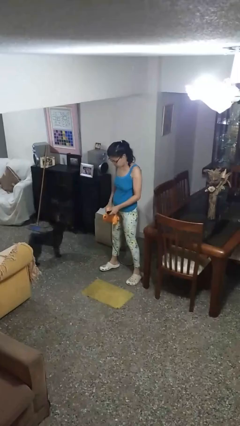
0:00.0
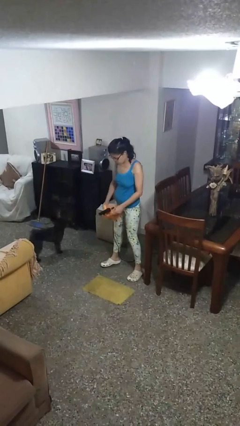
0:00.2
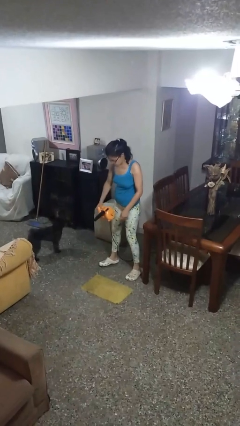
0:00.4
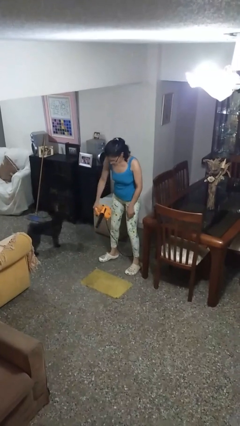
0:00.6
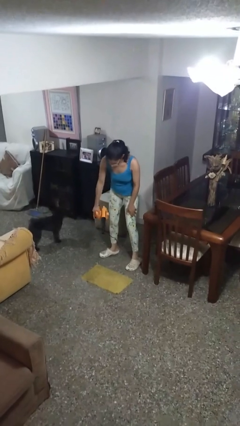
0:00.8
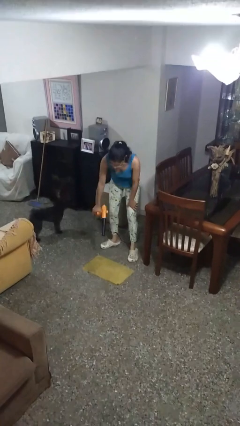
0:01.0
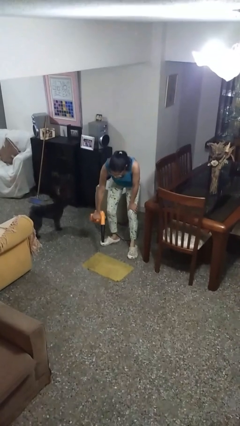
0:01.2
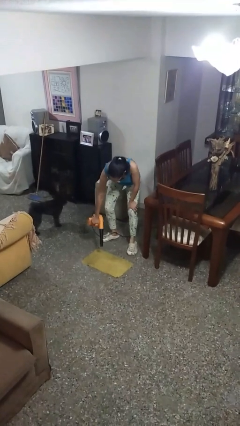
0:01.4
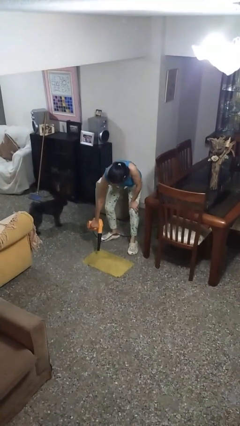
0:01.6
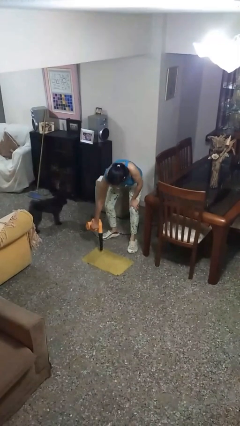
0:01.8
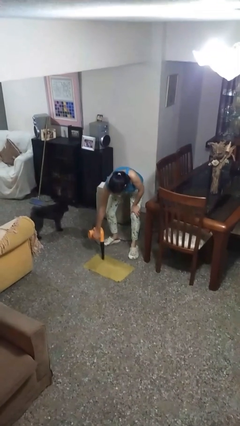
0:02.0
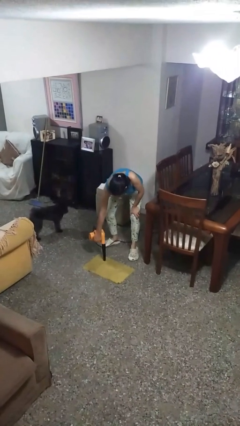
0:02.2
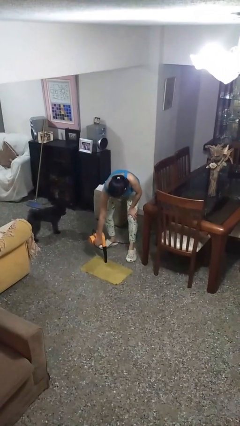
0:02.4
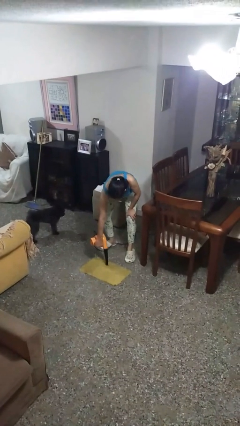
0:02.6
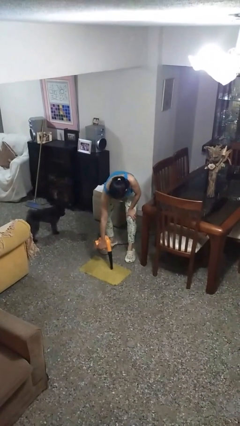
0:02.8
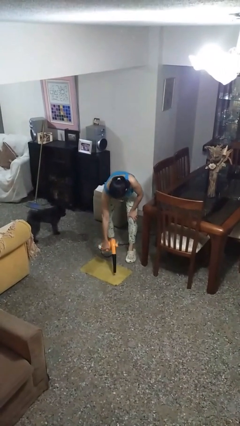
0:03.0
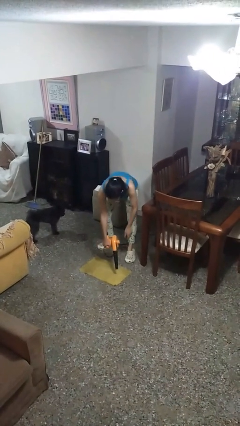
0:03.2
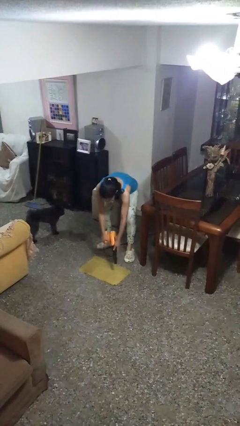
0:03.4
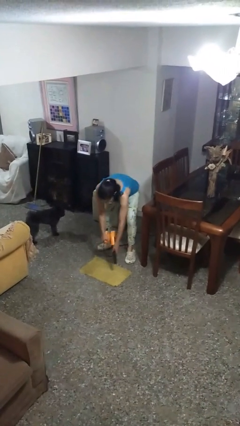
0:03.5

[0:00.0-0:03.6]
person vacuums carpet

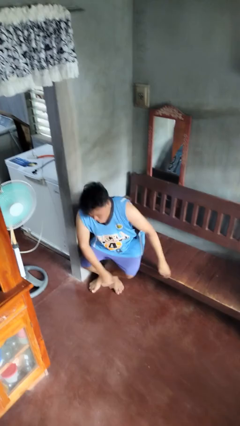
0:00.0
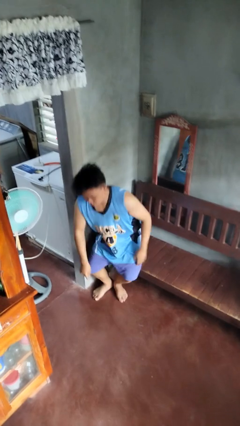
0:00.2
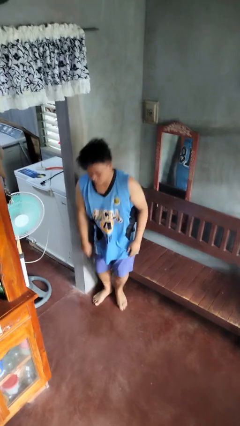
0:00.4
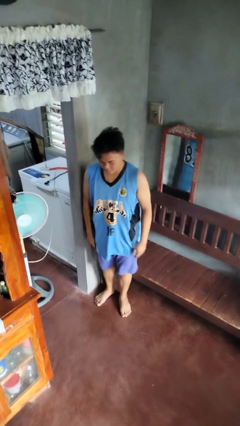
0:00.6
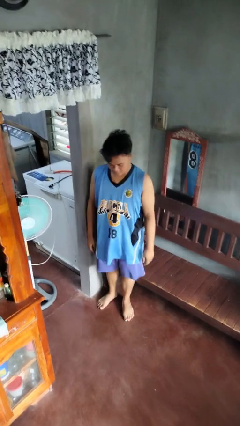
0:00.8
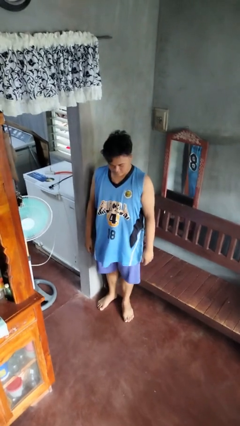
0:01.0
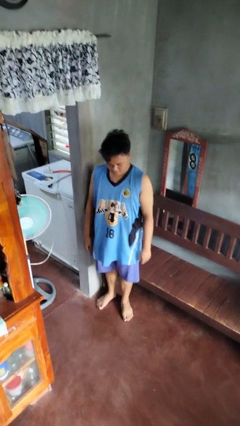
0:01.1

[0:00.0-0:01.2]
person stands up

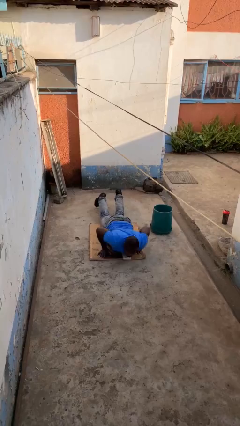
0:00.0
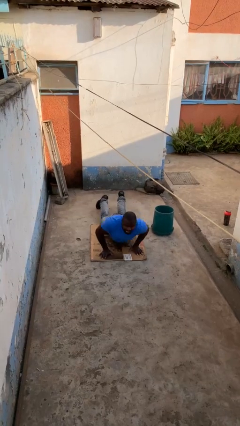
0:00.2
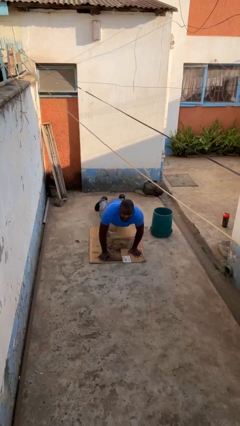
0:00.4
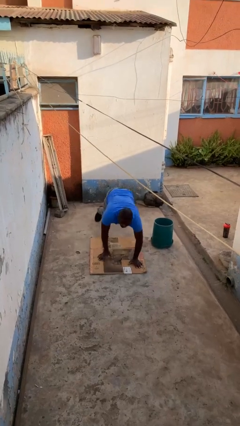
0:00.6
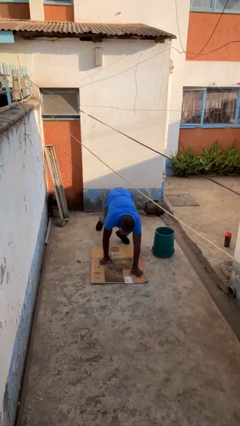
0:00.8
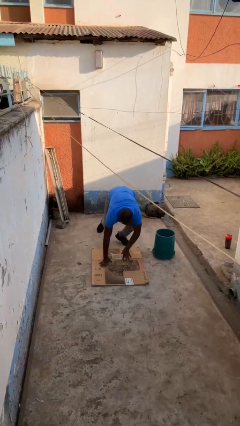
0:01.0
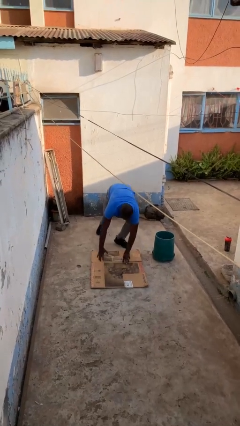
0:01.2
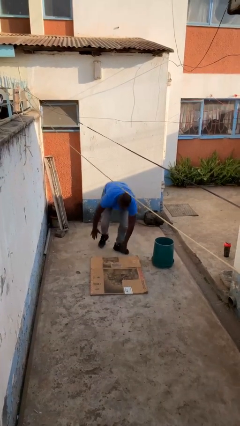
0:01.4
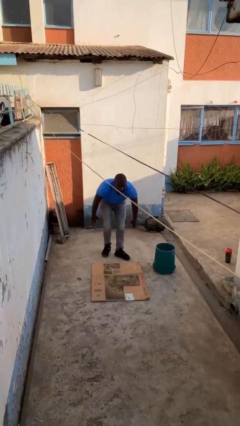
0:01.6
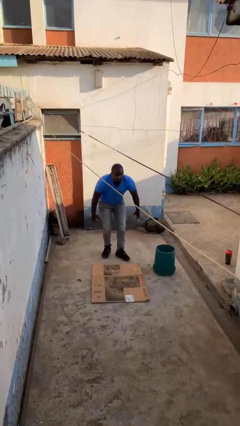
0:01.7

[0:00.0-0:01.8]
person stands up from floor

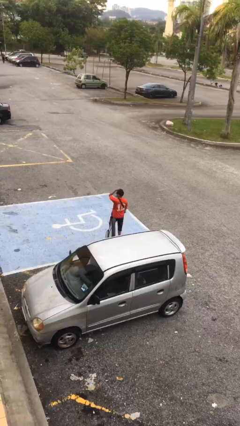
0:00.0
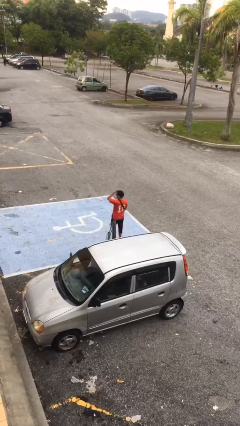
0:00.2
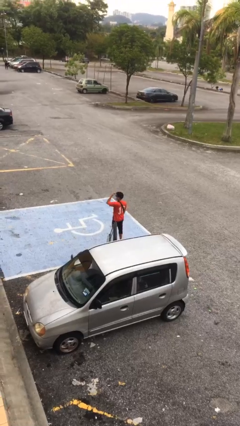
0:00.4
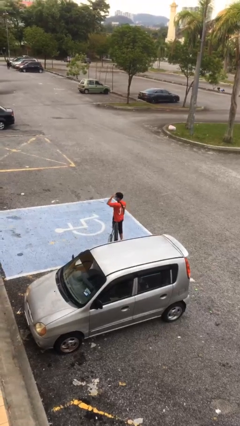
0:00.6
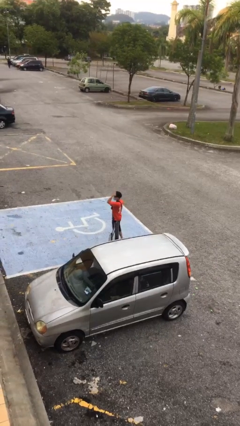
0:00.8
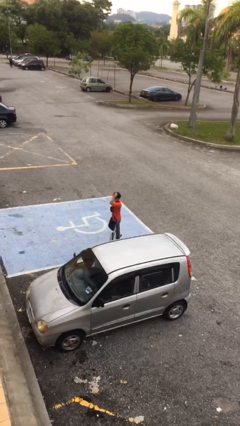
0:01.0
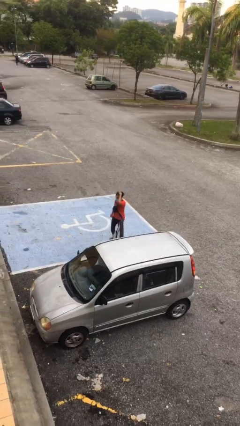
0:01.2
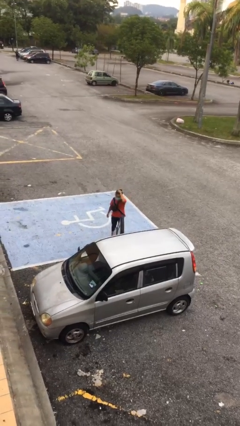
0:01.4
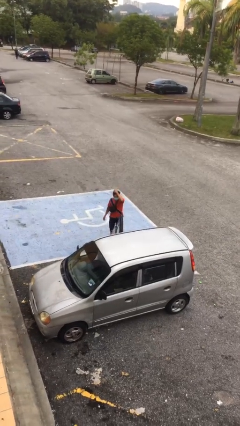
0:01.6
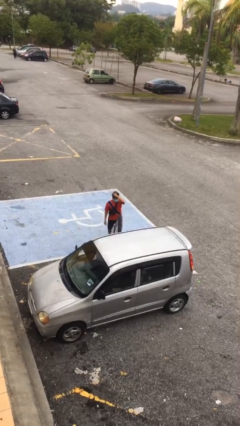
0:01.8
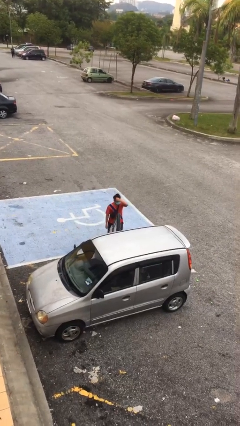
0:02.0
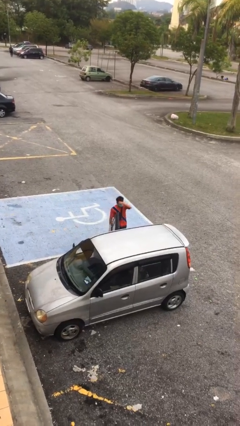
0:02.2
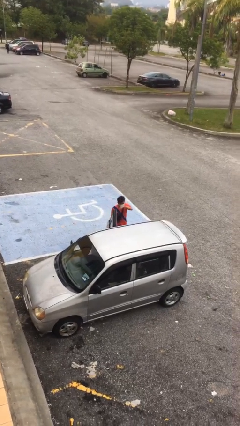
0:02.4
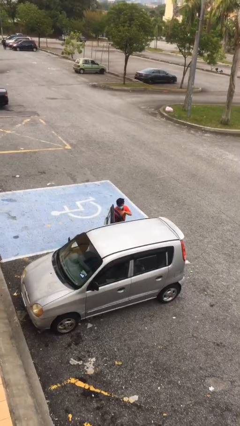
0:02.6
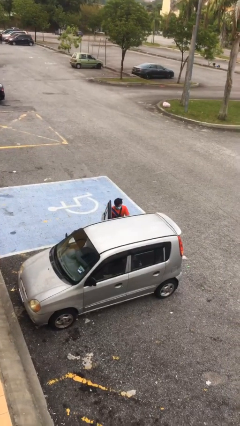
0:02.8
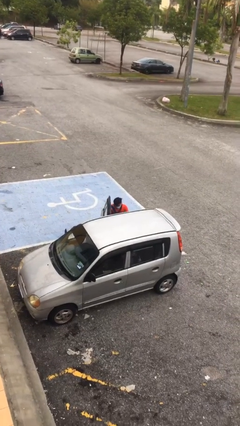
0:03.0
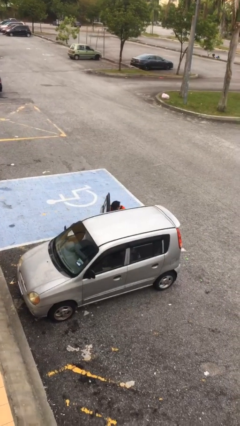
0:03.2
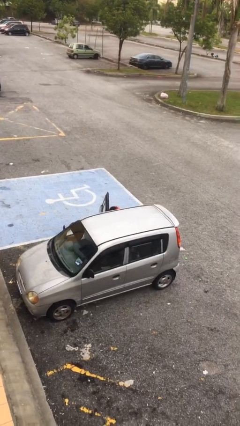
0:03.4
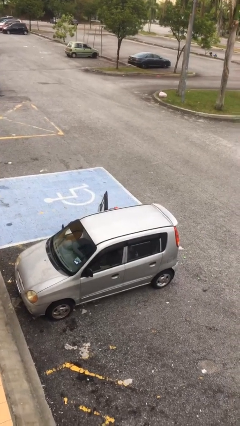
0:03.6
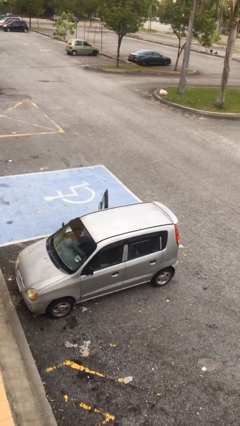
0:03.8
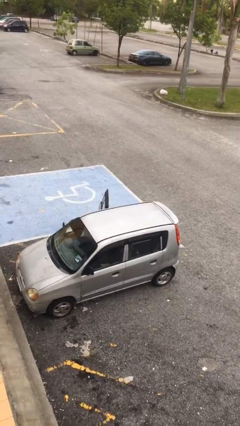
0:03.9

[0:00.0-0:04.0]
person enters car

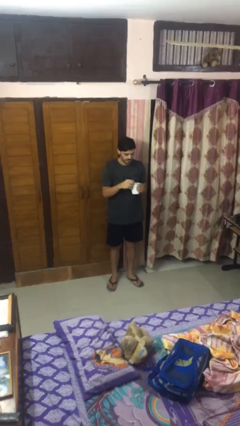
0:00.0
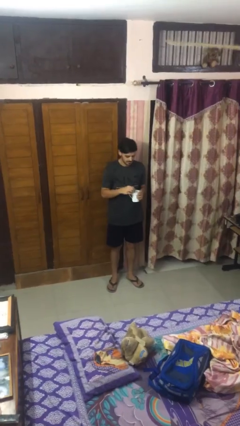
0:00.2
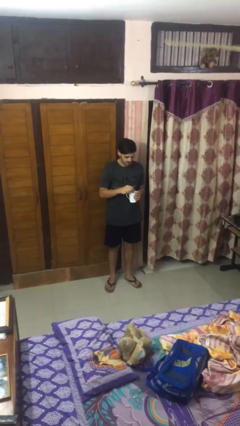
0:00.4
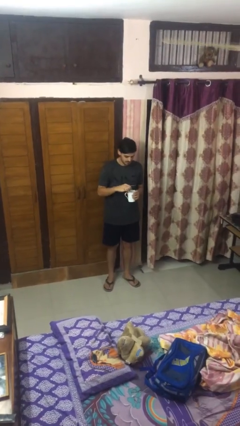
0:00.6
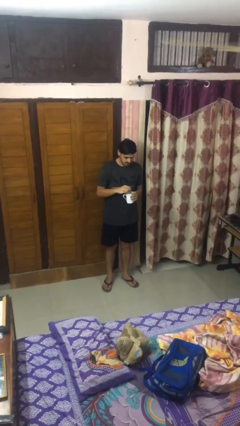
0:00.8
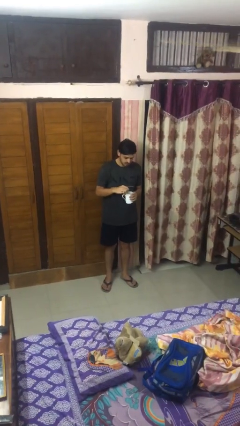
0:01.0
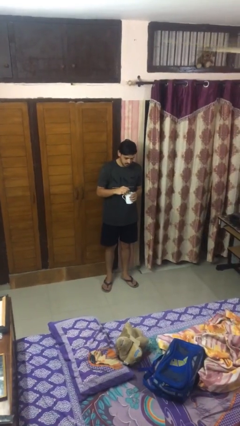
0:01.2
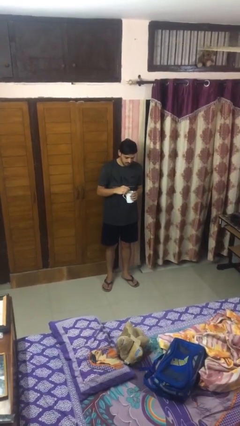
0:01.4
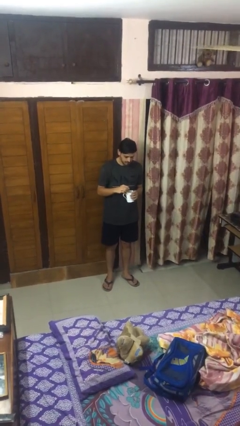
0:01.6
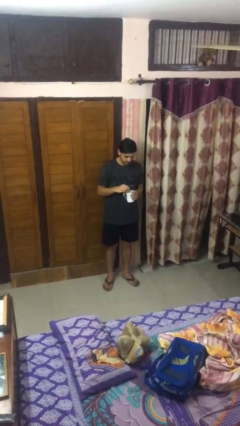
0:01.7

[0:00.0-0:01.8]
person stirs mug

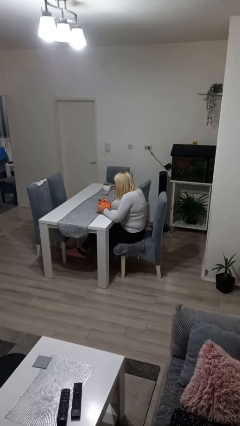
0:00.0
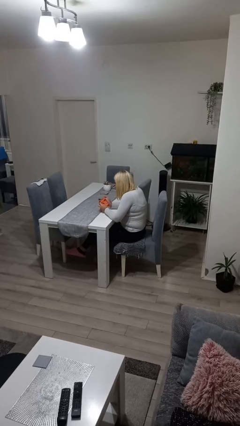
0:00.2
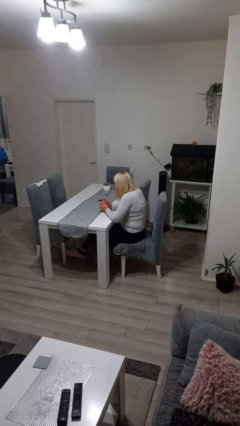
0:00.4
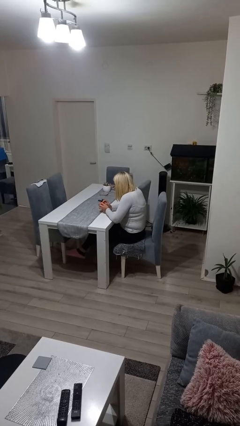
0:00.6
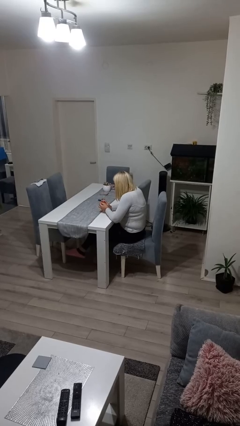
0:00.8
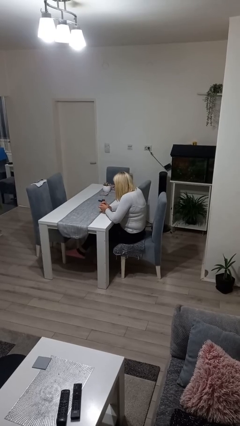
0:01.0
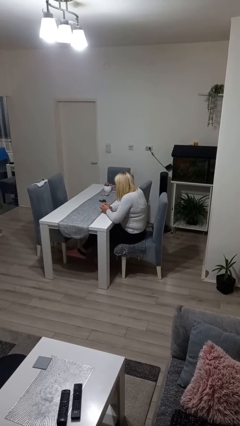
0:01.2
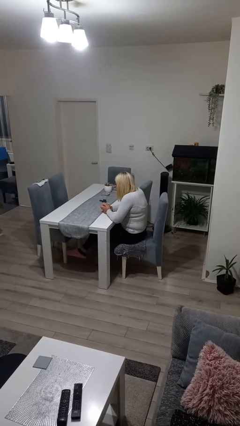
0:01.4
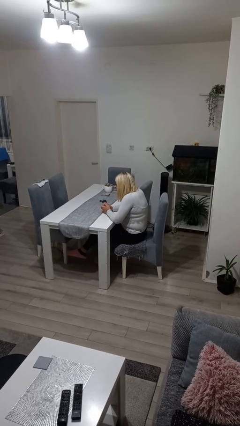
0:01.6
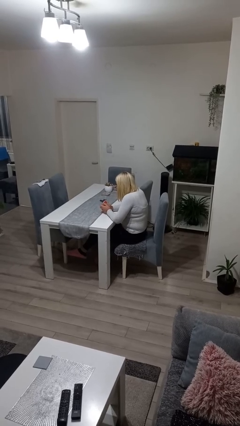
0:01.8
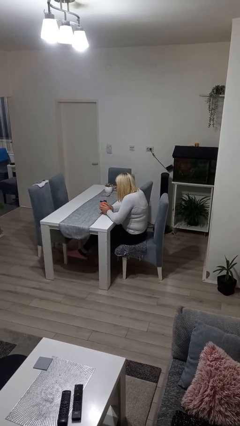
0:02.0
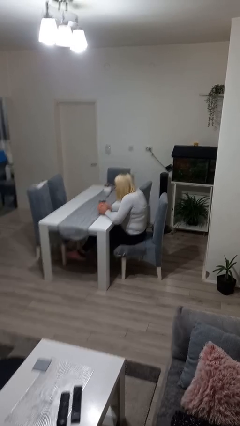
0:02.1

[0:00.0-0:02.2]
person crumples paper

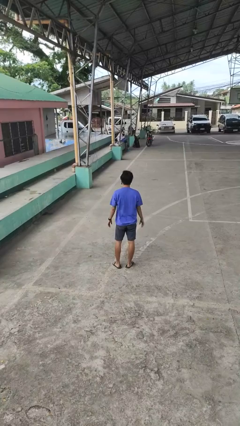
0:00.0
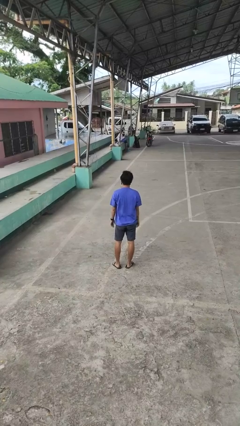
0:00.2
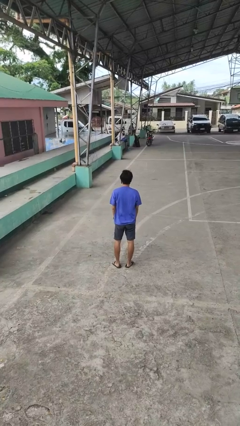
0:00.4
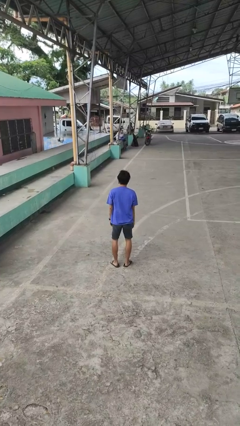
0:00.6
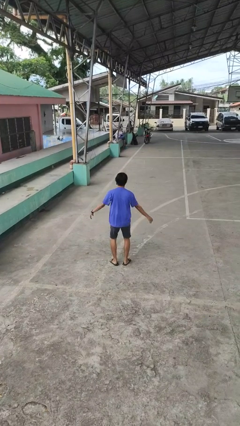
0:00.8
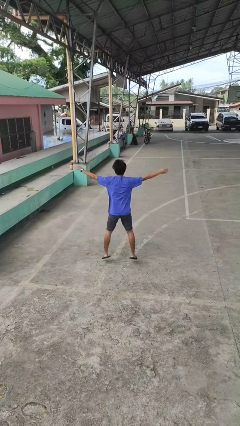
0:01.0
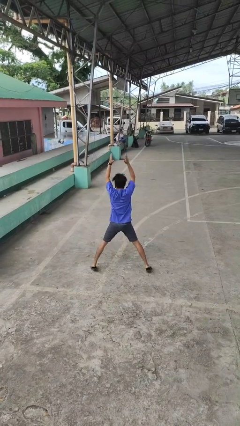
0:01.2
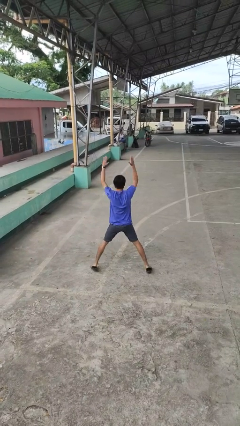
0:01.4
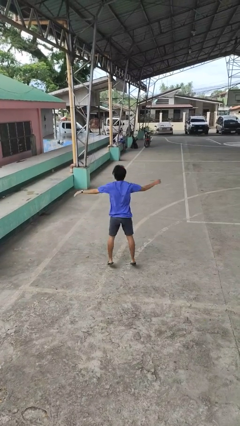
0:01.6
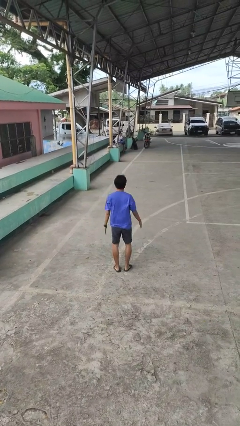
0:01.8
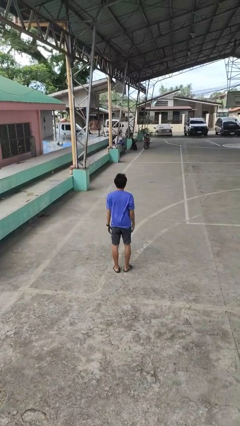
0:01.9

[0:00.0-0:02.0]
person exercises with jumping jacks
